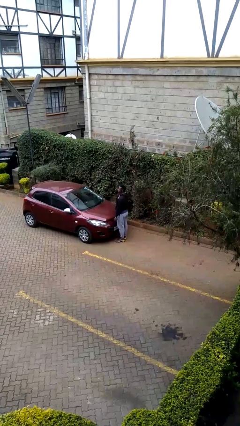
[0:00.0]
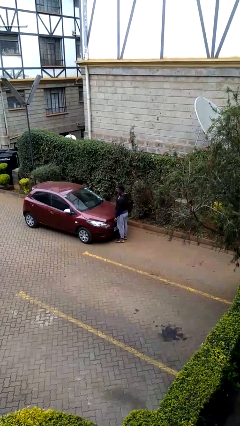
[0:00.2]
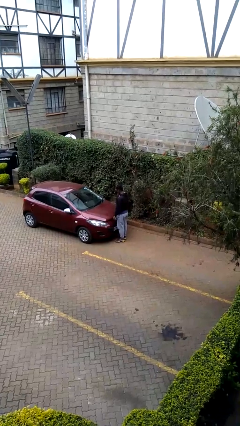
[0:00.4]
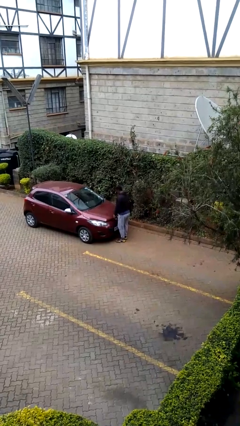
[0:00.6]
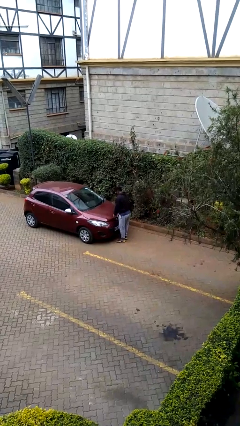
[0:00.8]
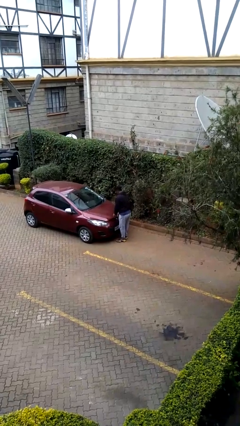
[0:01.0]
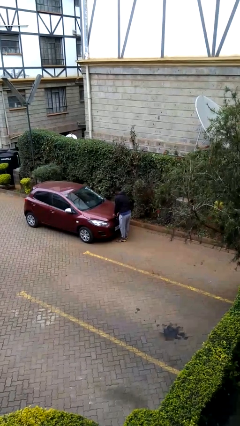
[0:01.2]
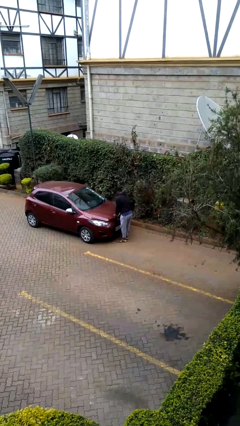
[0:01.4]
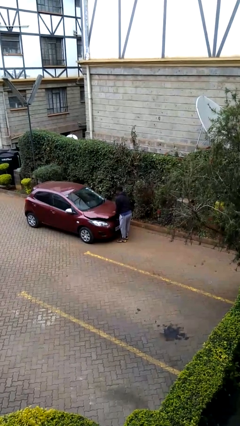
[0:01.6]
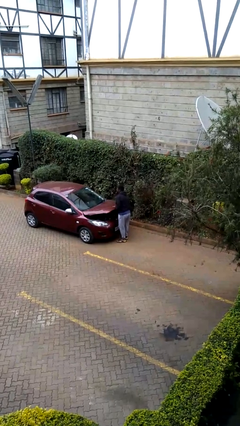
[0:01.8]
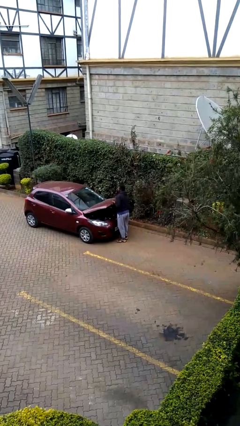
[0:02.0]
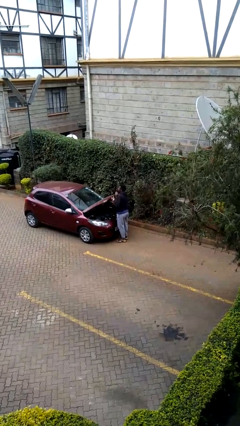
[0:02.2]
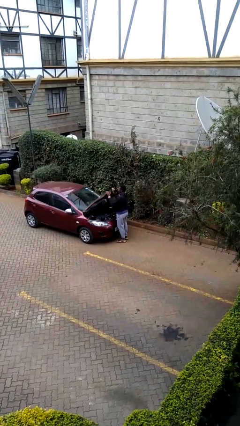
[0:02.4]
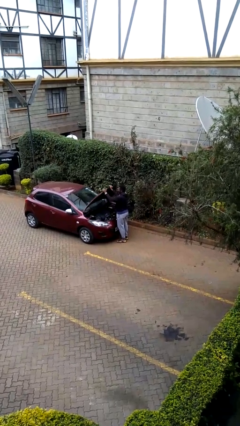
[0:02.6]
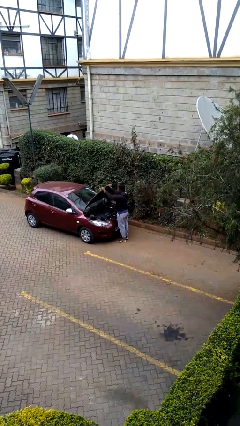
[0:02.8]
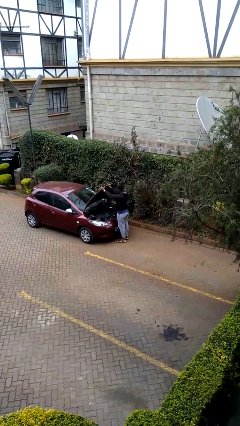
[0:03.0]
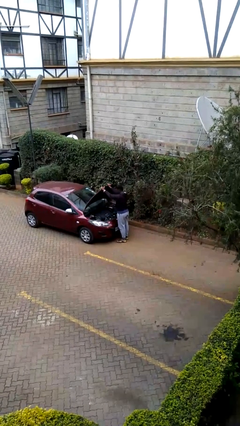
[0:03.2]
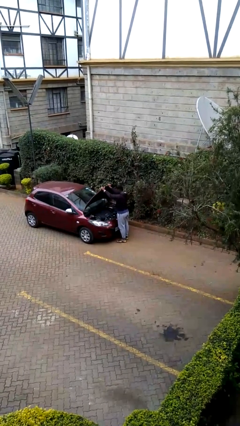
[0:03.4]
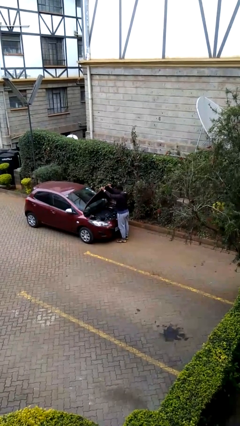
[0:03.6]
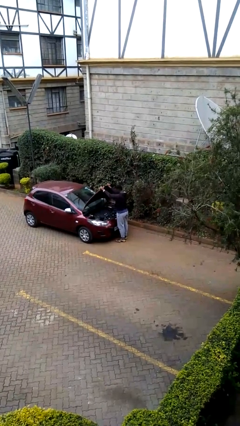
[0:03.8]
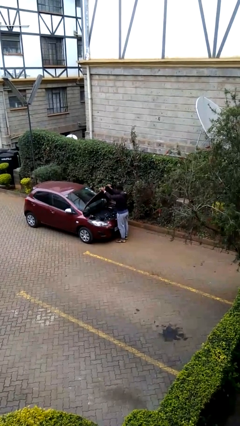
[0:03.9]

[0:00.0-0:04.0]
person opens car hood

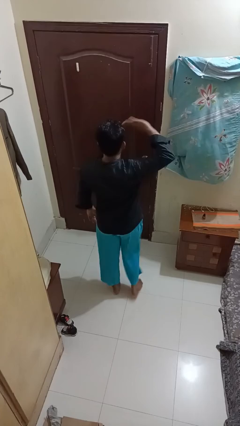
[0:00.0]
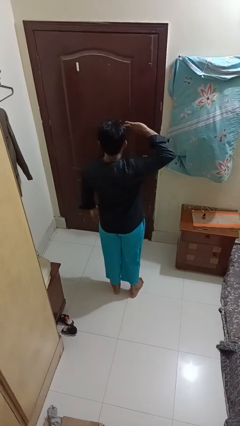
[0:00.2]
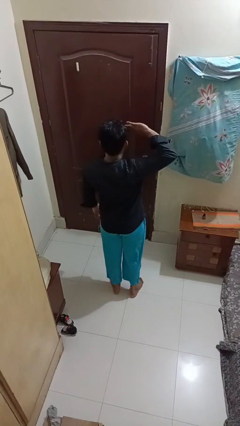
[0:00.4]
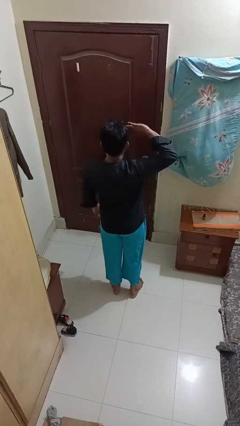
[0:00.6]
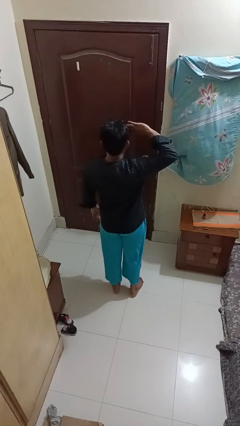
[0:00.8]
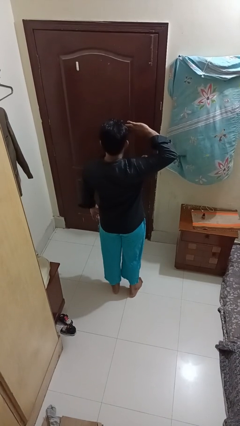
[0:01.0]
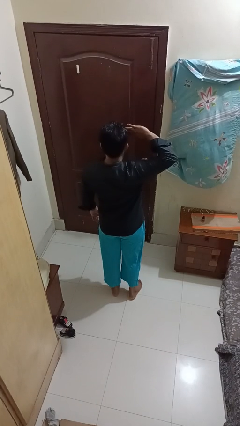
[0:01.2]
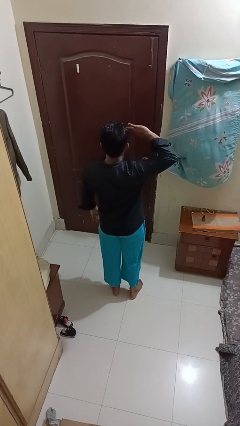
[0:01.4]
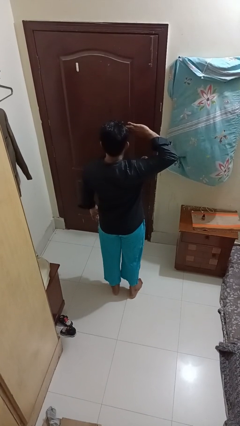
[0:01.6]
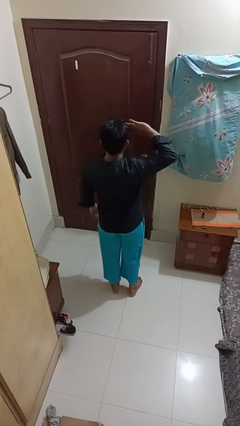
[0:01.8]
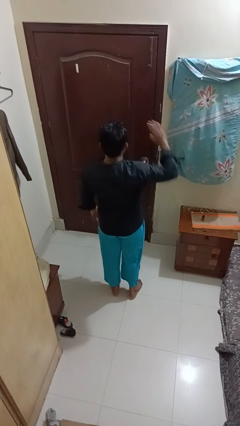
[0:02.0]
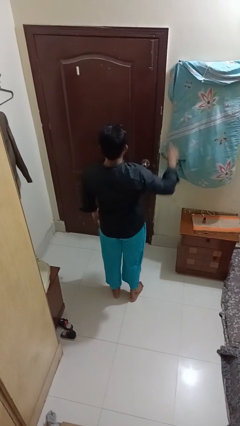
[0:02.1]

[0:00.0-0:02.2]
person salutes

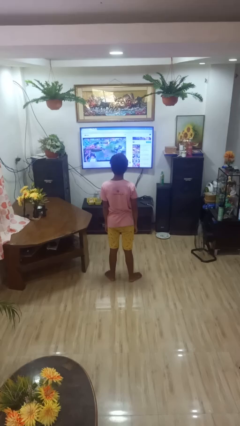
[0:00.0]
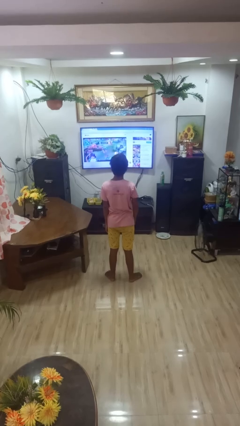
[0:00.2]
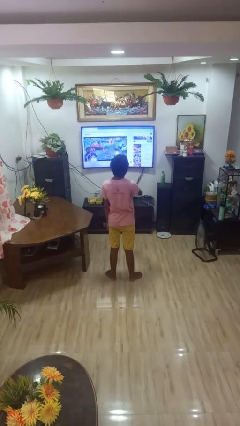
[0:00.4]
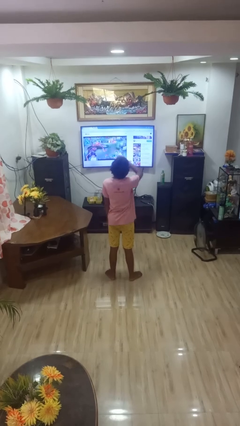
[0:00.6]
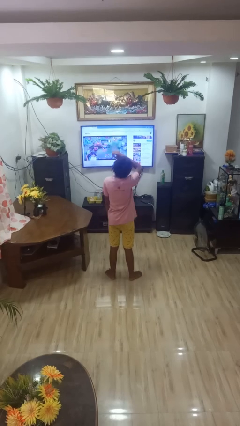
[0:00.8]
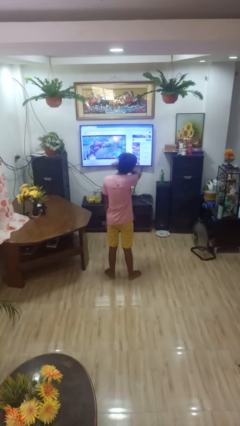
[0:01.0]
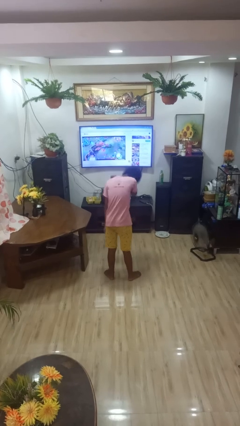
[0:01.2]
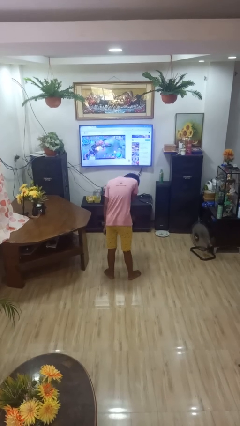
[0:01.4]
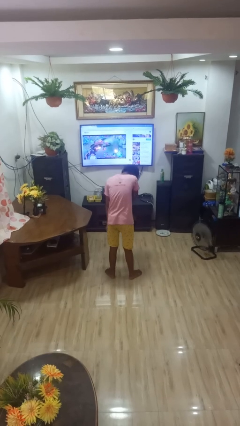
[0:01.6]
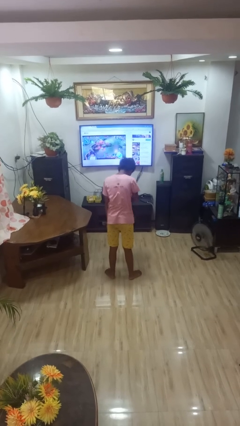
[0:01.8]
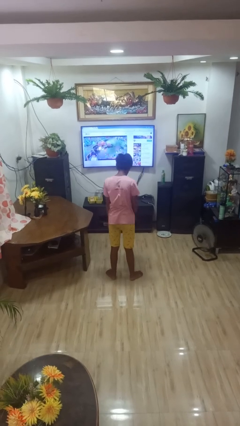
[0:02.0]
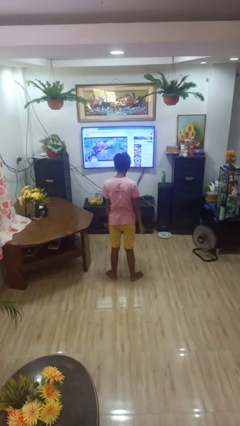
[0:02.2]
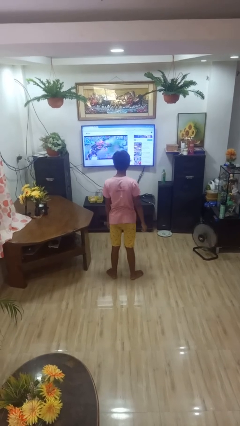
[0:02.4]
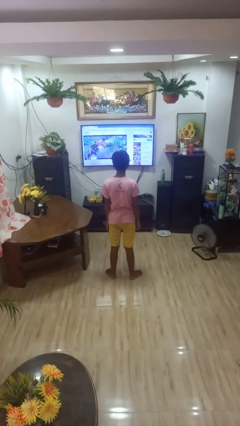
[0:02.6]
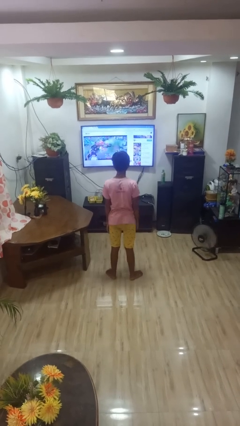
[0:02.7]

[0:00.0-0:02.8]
person sneezes into arm

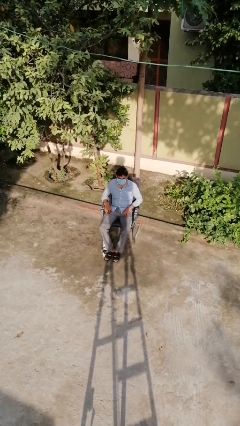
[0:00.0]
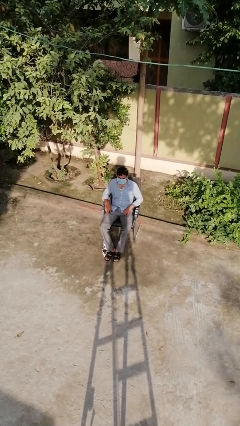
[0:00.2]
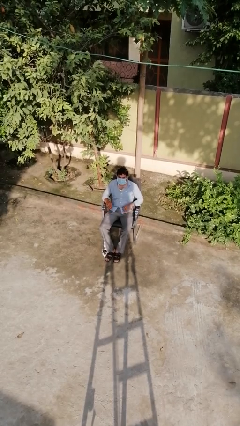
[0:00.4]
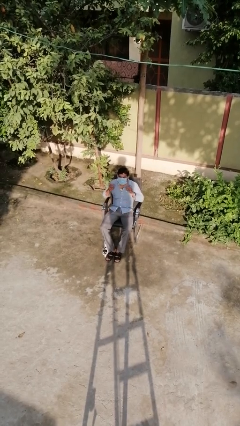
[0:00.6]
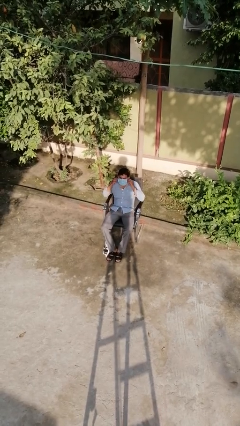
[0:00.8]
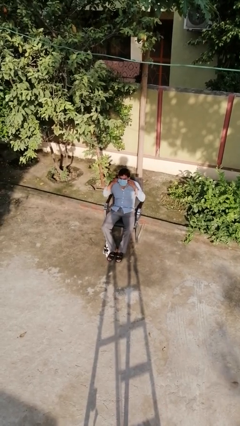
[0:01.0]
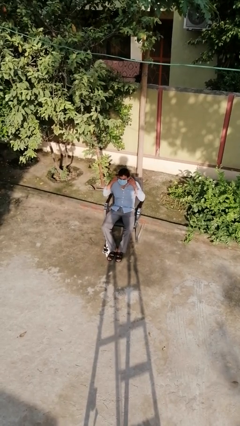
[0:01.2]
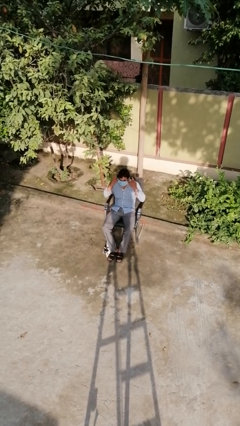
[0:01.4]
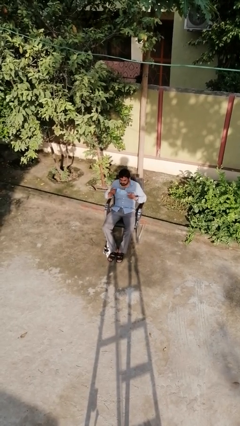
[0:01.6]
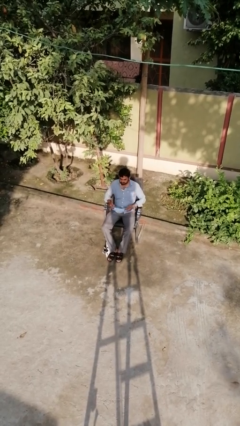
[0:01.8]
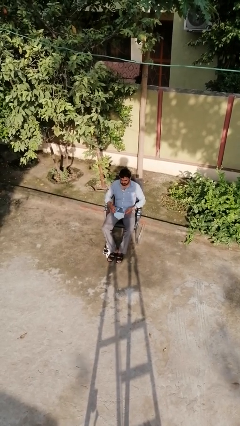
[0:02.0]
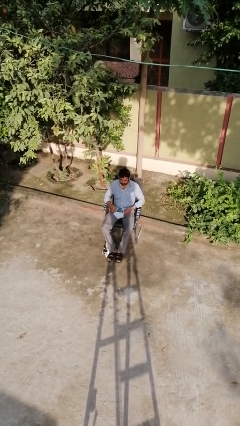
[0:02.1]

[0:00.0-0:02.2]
person takes off facemask

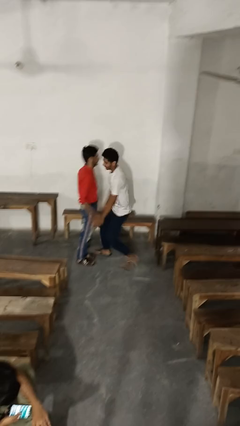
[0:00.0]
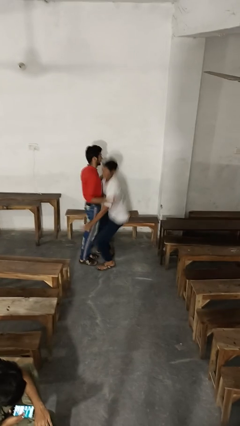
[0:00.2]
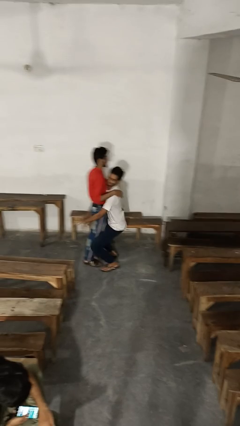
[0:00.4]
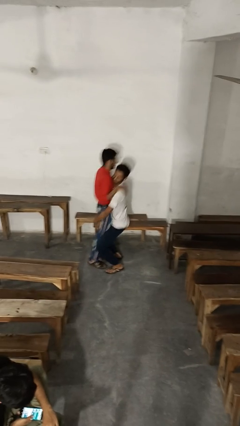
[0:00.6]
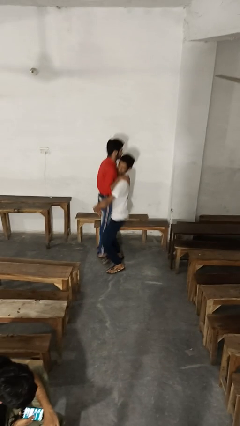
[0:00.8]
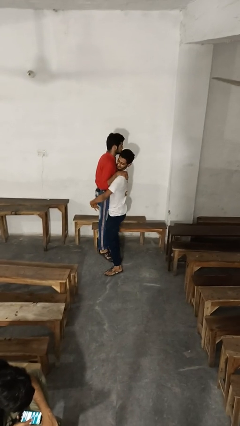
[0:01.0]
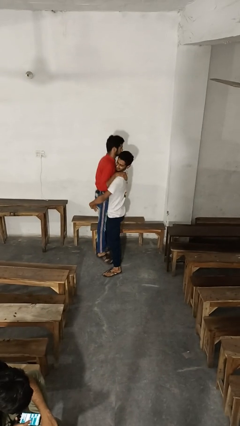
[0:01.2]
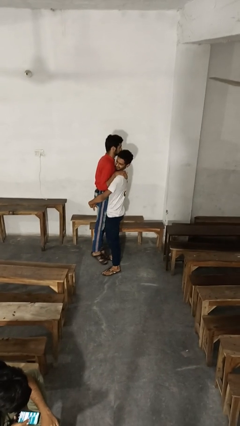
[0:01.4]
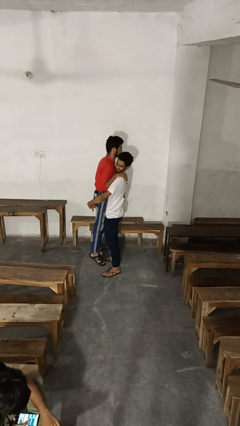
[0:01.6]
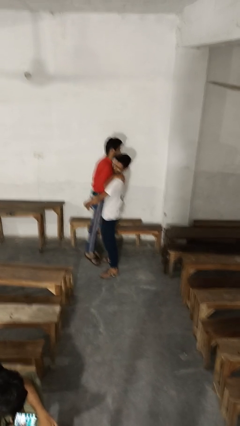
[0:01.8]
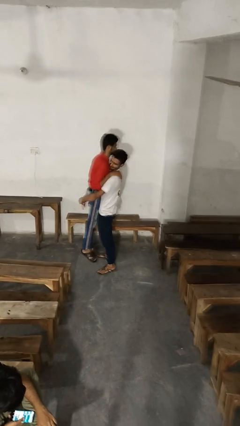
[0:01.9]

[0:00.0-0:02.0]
person picks up person

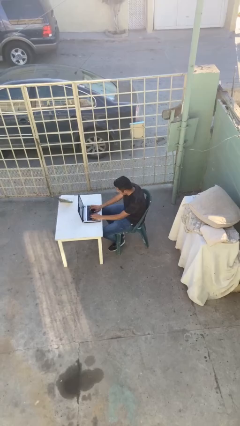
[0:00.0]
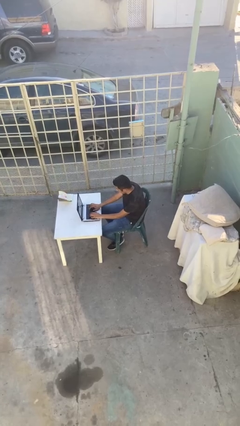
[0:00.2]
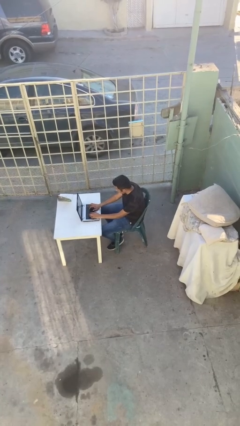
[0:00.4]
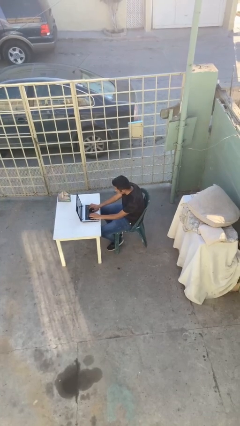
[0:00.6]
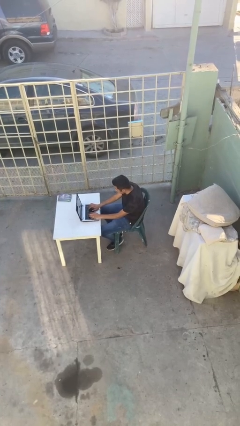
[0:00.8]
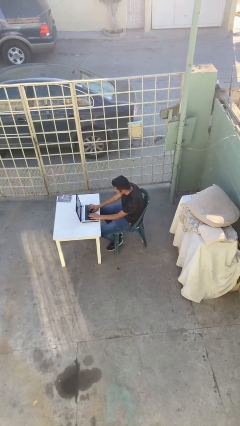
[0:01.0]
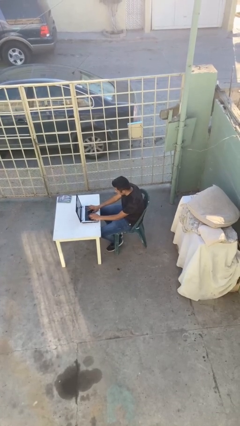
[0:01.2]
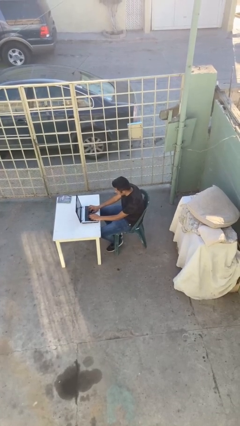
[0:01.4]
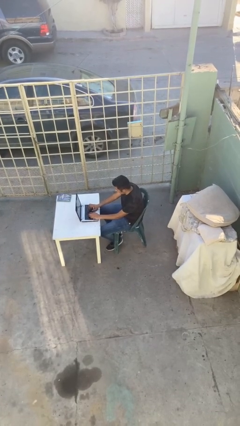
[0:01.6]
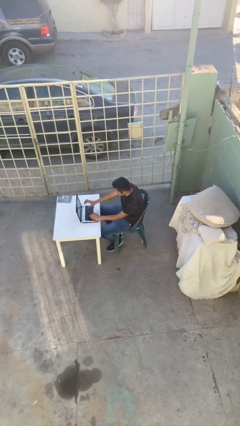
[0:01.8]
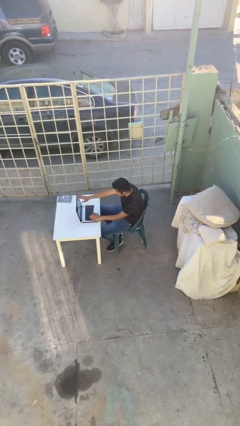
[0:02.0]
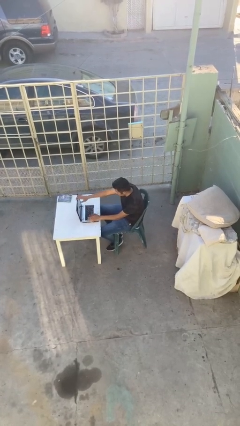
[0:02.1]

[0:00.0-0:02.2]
person interacts with laptop

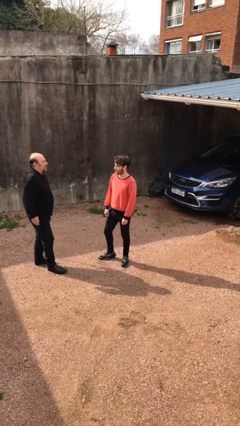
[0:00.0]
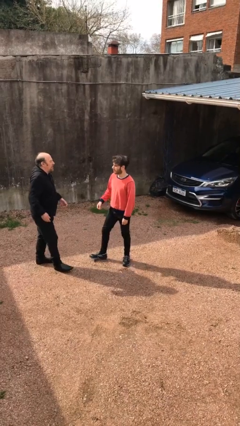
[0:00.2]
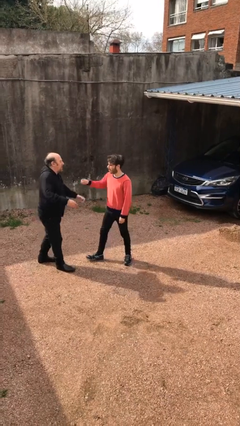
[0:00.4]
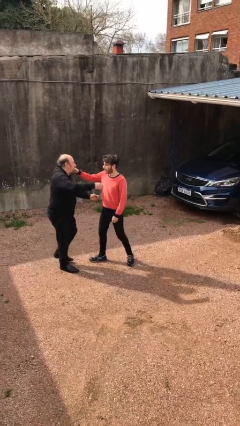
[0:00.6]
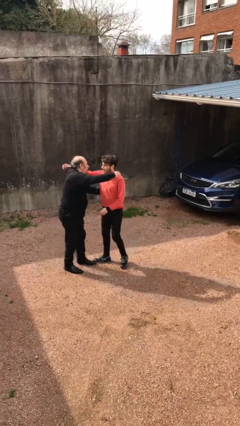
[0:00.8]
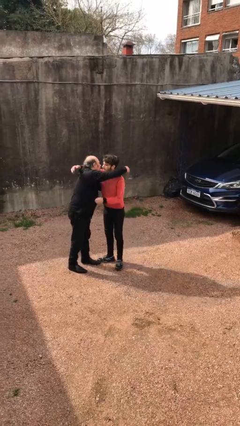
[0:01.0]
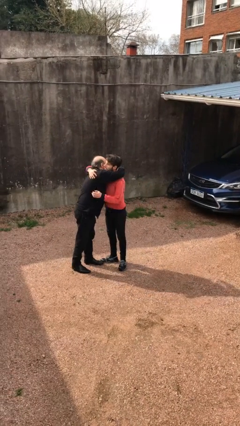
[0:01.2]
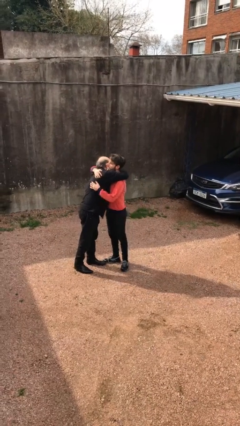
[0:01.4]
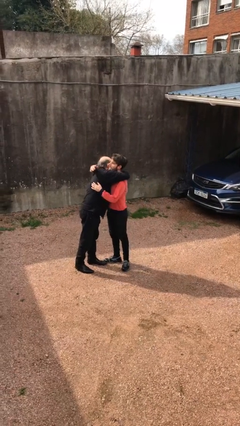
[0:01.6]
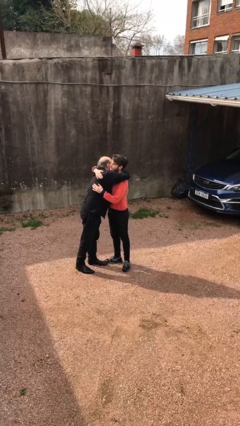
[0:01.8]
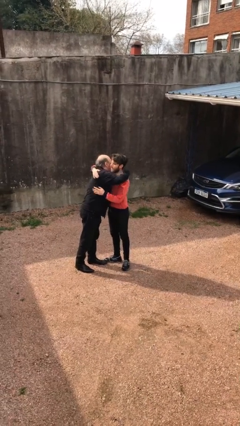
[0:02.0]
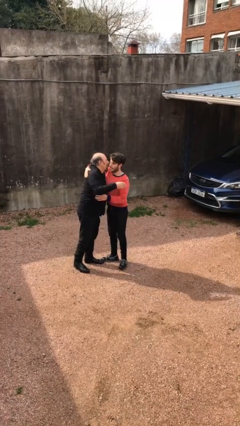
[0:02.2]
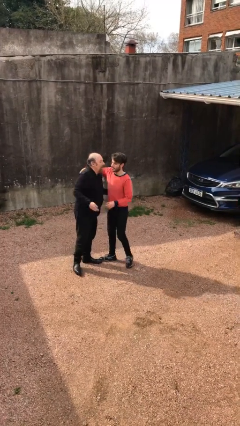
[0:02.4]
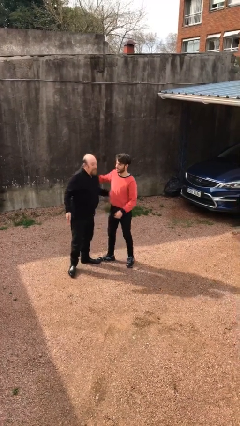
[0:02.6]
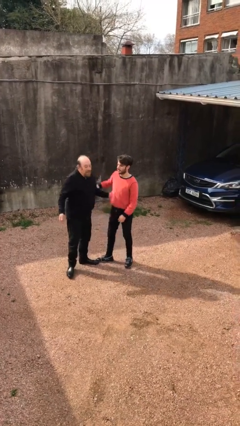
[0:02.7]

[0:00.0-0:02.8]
person embraces person
